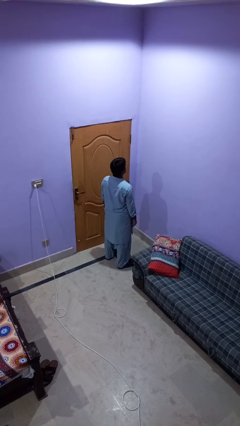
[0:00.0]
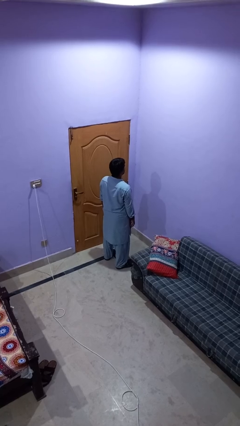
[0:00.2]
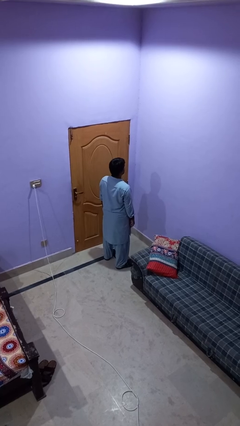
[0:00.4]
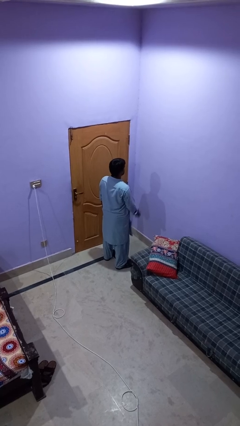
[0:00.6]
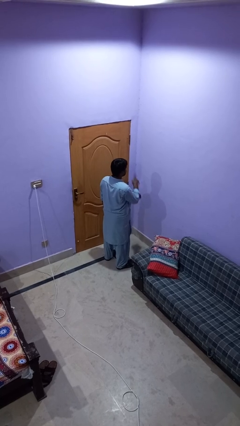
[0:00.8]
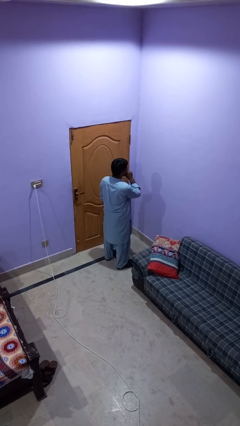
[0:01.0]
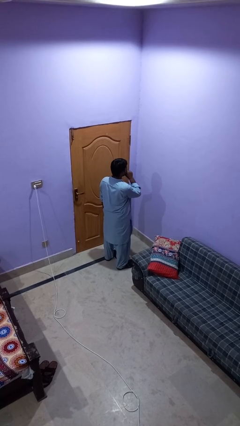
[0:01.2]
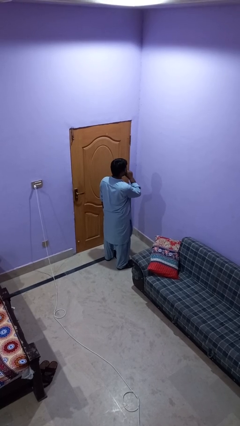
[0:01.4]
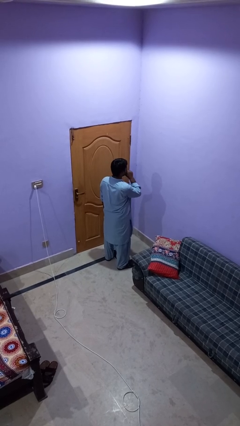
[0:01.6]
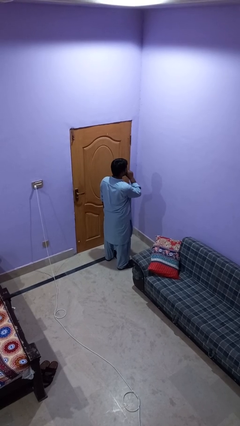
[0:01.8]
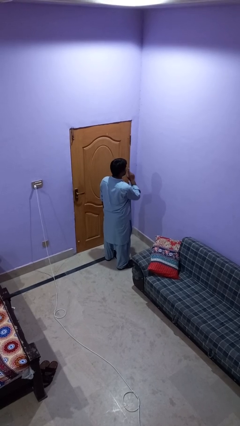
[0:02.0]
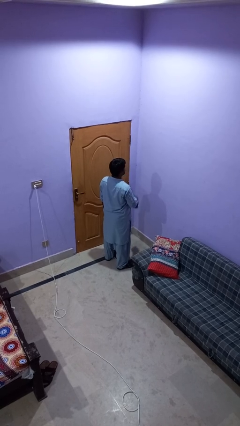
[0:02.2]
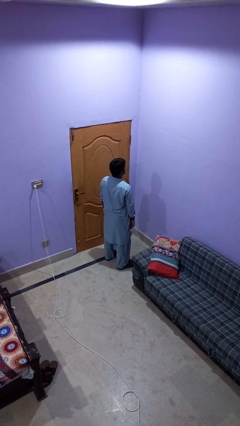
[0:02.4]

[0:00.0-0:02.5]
person gestures be quiet

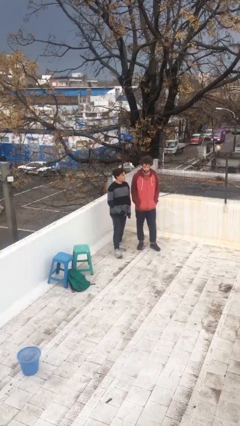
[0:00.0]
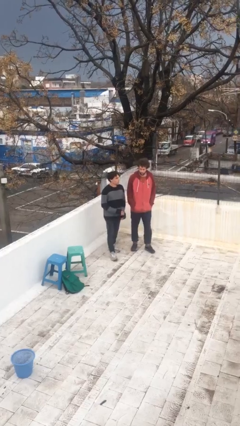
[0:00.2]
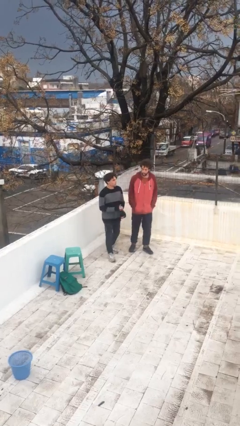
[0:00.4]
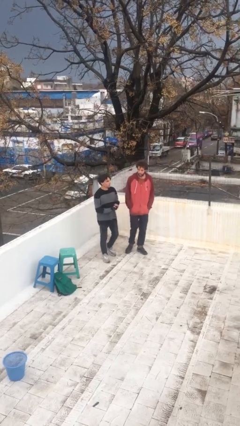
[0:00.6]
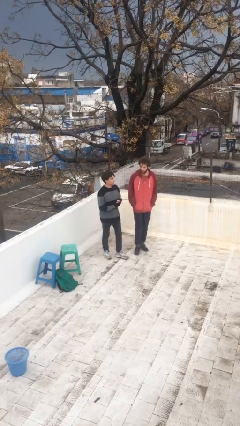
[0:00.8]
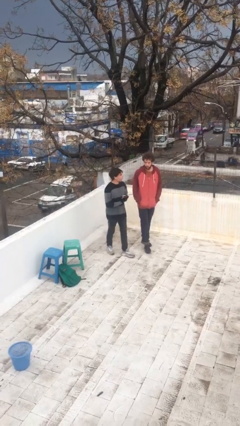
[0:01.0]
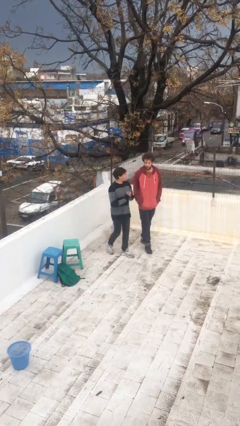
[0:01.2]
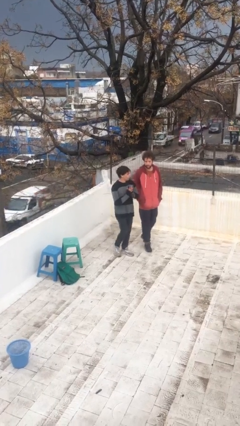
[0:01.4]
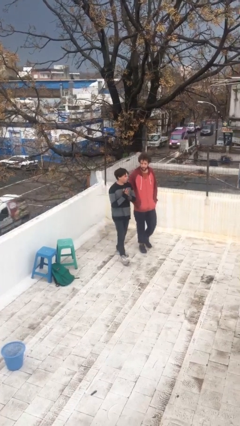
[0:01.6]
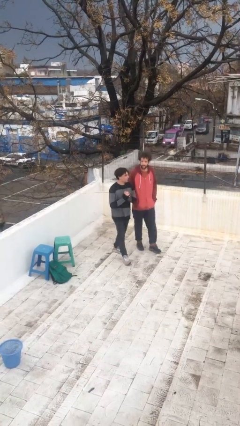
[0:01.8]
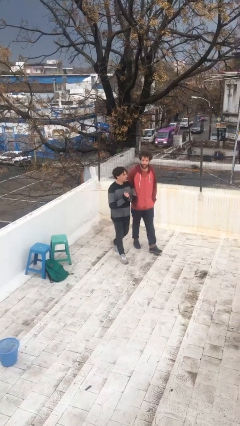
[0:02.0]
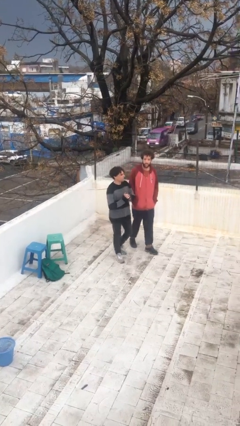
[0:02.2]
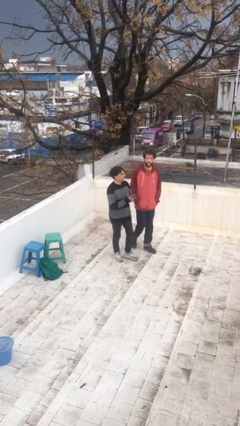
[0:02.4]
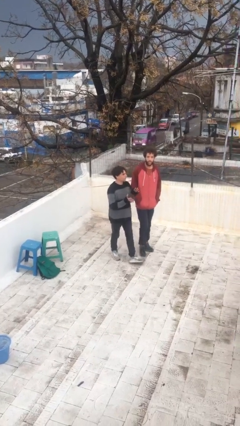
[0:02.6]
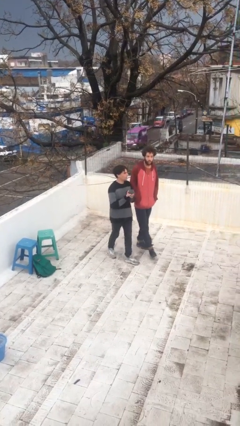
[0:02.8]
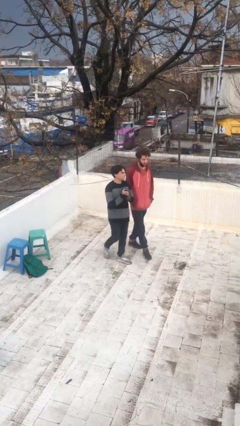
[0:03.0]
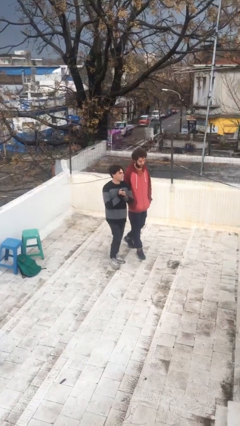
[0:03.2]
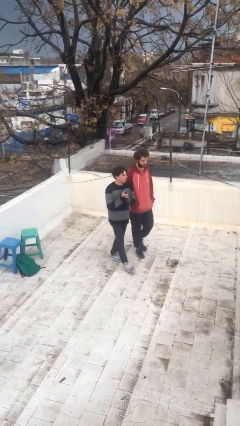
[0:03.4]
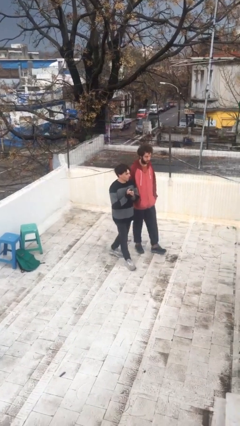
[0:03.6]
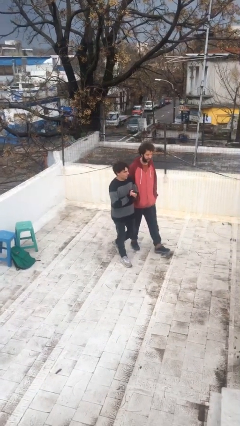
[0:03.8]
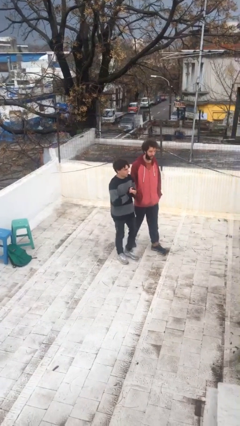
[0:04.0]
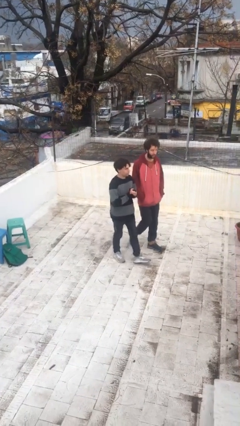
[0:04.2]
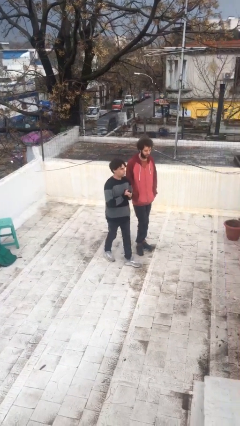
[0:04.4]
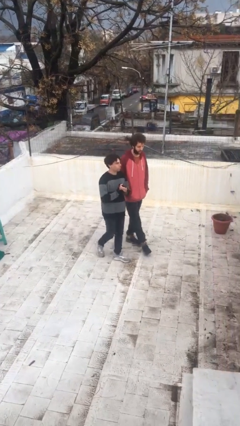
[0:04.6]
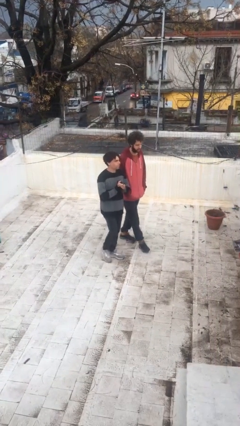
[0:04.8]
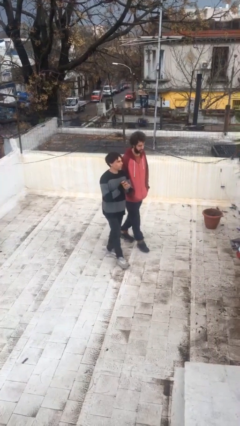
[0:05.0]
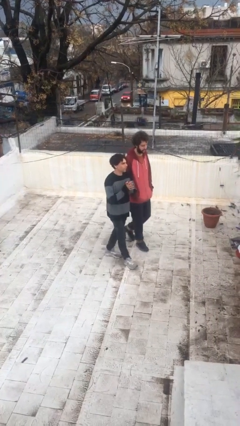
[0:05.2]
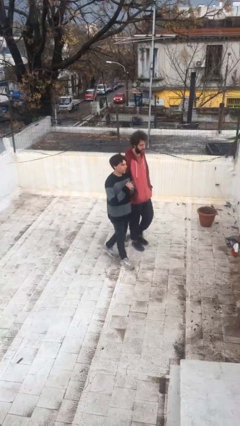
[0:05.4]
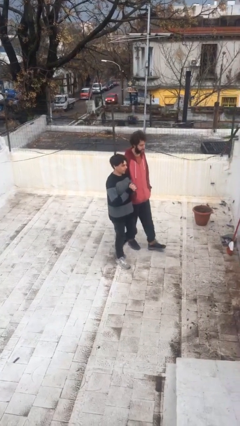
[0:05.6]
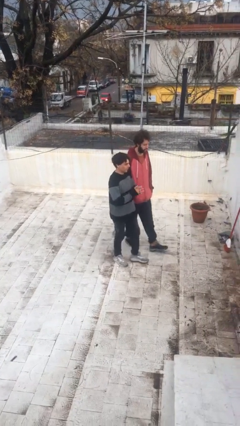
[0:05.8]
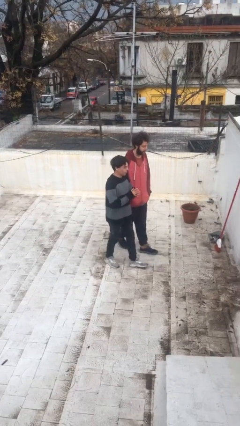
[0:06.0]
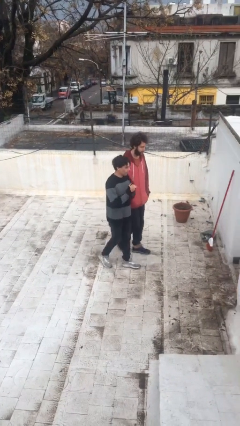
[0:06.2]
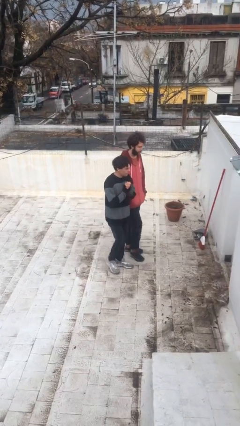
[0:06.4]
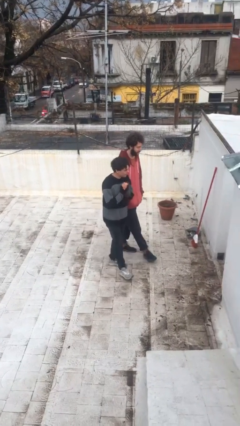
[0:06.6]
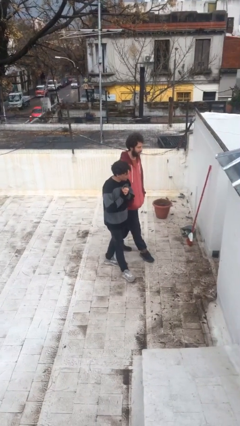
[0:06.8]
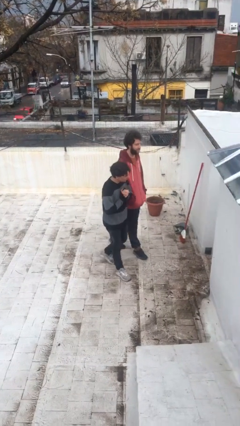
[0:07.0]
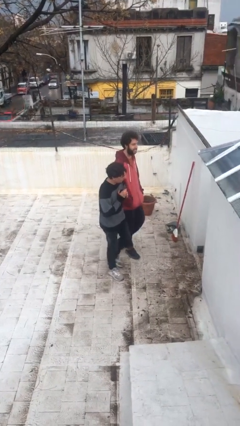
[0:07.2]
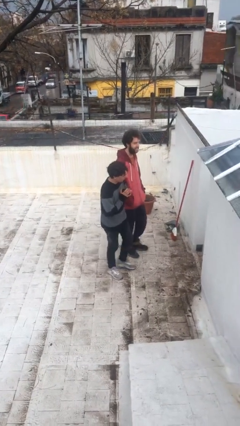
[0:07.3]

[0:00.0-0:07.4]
person talks to person

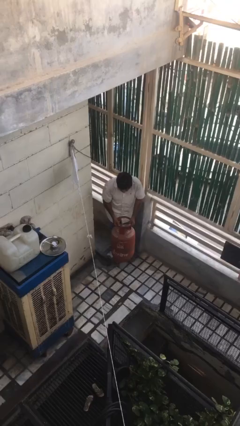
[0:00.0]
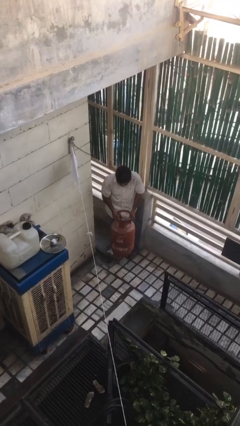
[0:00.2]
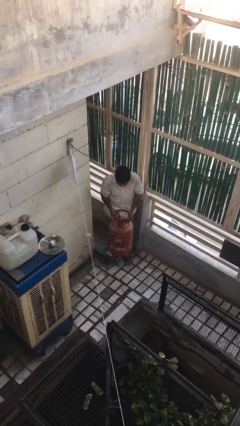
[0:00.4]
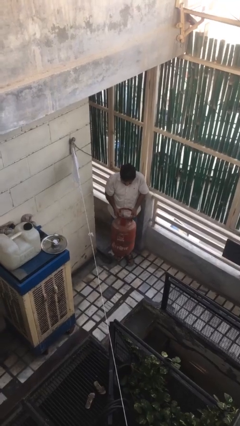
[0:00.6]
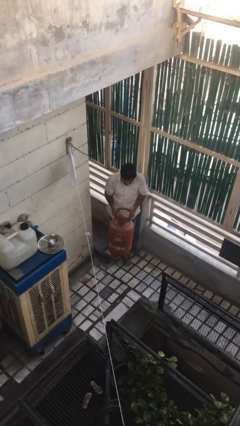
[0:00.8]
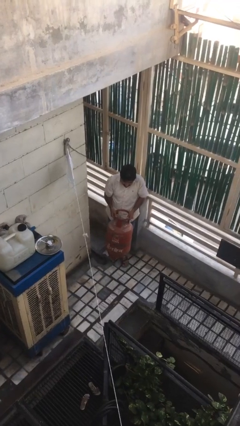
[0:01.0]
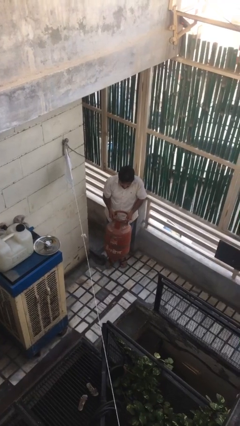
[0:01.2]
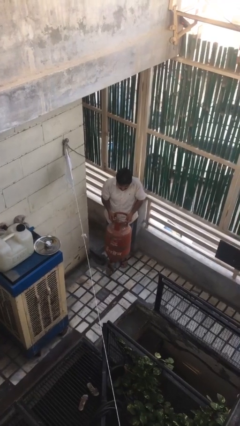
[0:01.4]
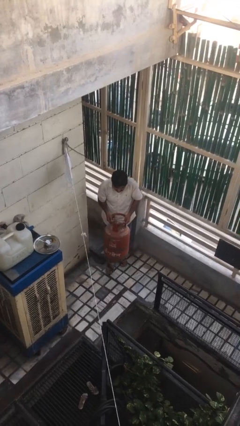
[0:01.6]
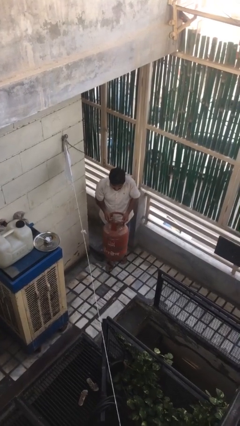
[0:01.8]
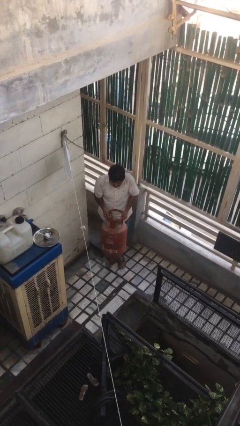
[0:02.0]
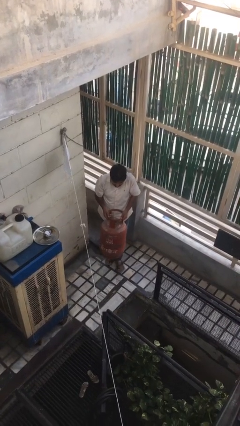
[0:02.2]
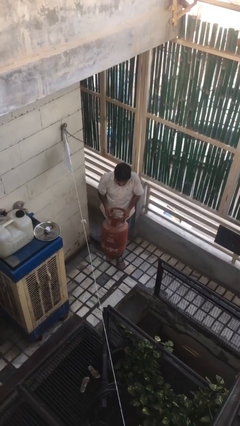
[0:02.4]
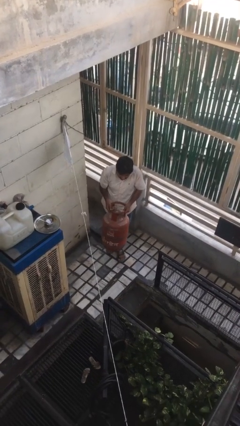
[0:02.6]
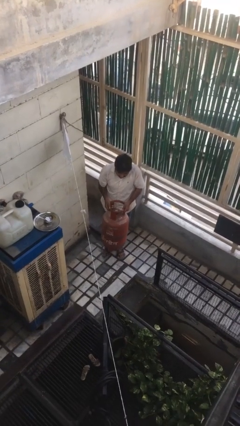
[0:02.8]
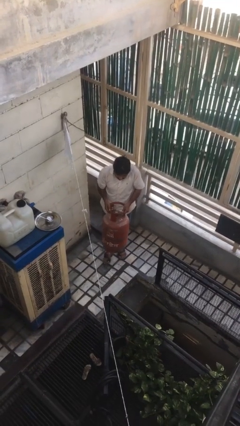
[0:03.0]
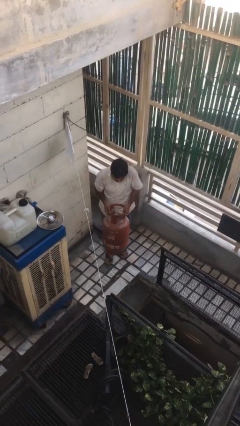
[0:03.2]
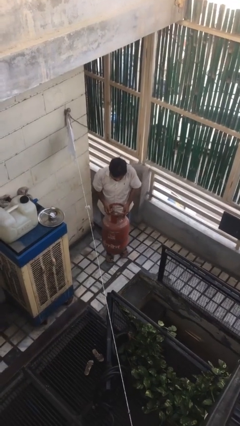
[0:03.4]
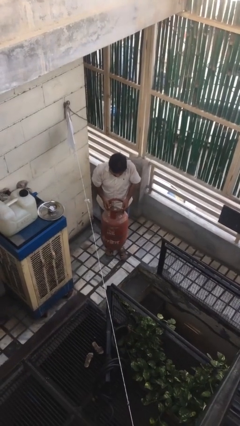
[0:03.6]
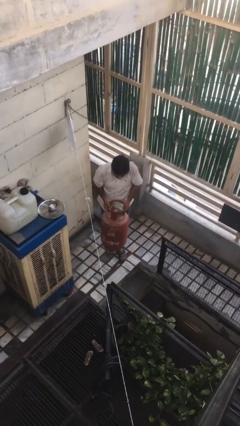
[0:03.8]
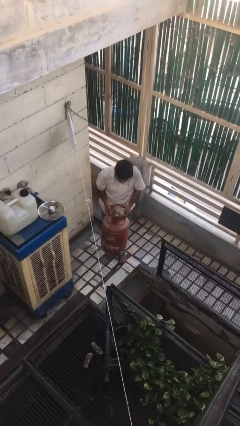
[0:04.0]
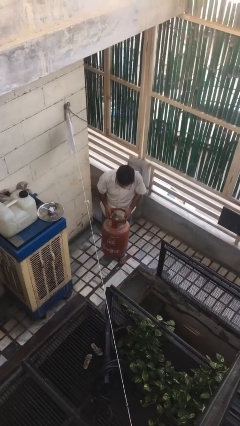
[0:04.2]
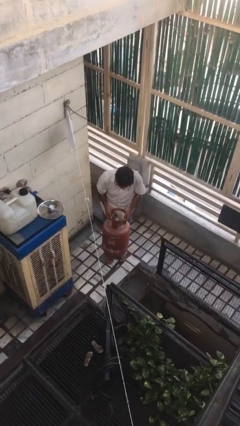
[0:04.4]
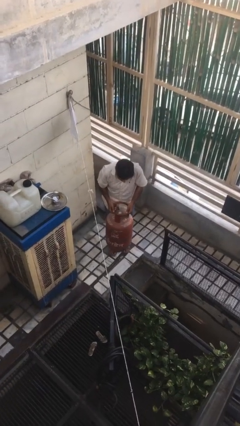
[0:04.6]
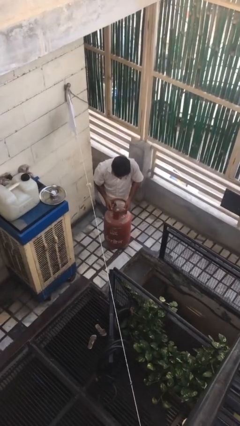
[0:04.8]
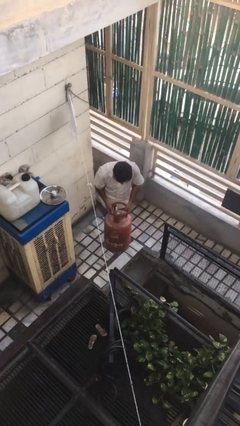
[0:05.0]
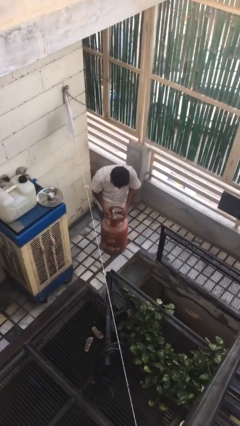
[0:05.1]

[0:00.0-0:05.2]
person carries heavy object

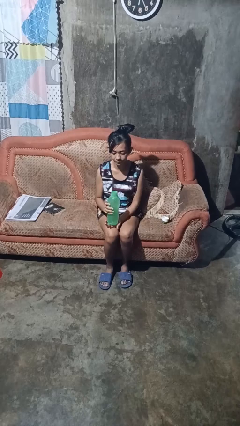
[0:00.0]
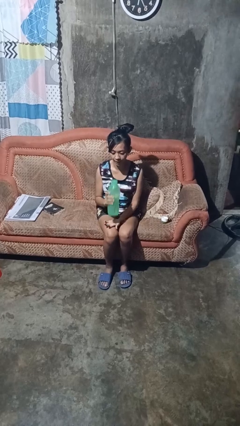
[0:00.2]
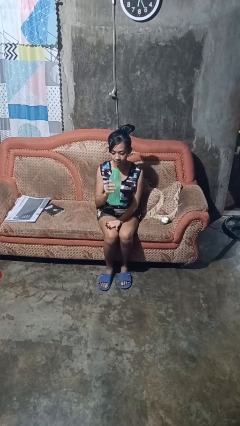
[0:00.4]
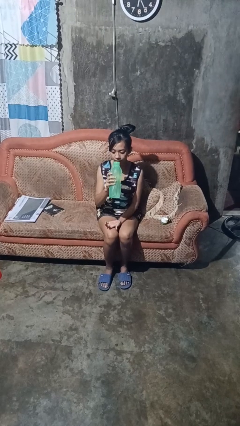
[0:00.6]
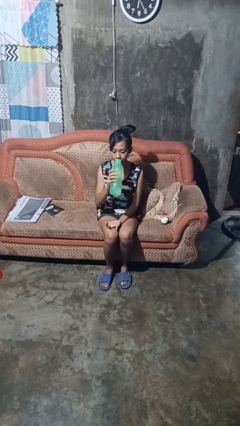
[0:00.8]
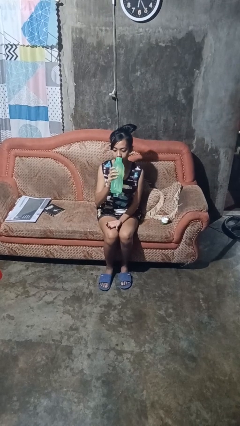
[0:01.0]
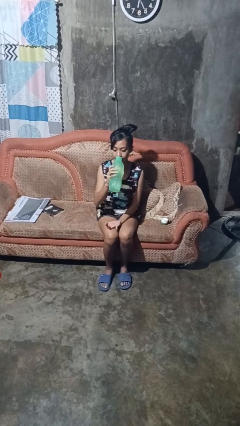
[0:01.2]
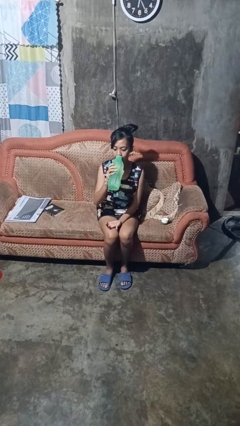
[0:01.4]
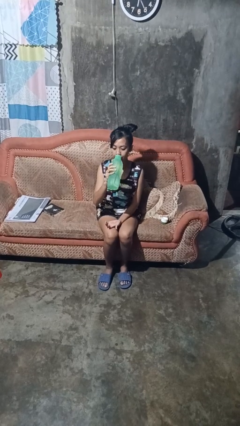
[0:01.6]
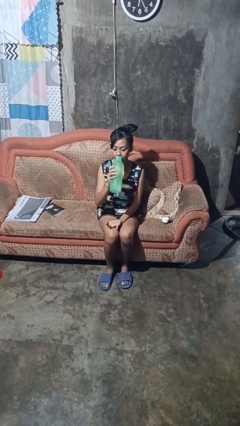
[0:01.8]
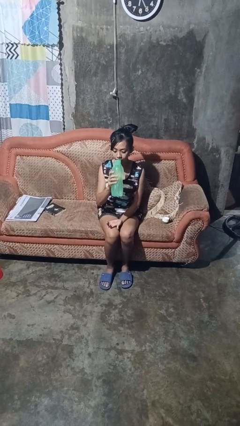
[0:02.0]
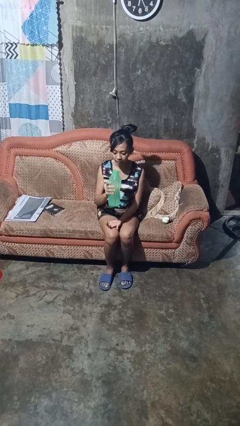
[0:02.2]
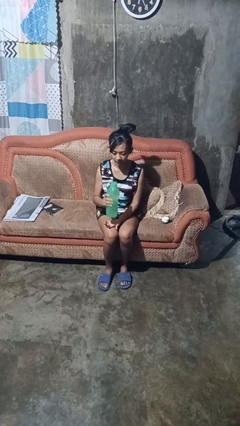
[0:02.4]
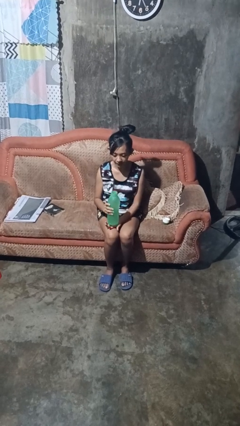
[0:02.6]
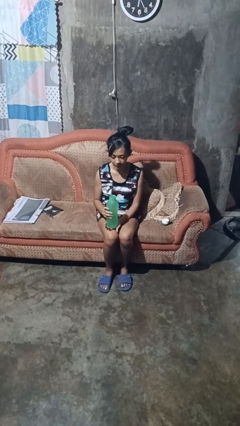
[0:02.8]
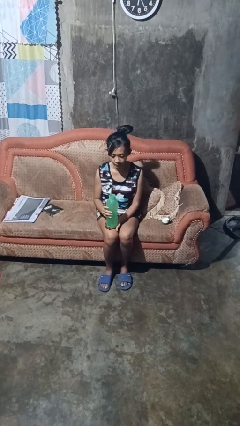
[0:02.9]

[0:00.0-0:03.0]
person drinks from bottle
